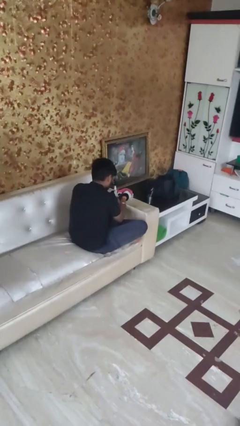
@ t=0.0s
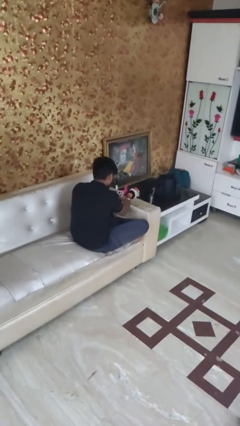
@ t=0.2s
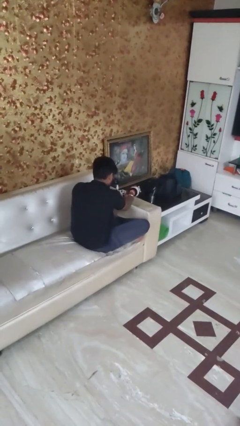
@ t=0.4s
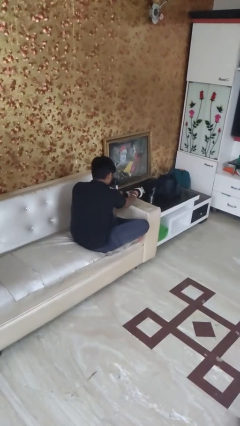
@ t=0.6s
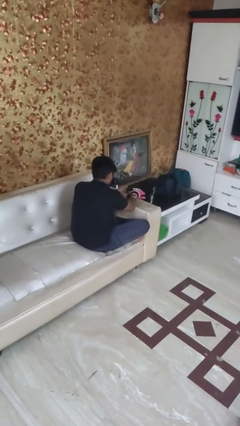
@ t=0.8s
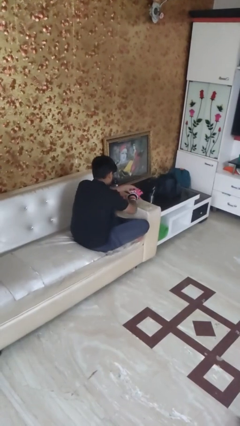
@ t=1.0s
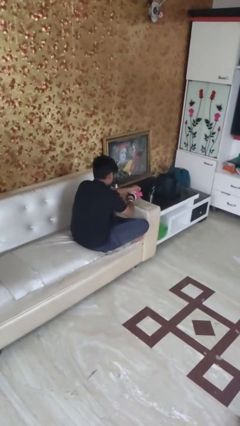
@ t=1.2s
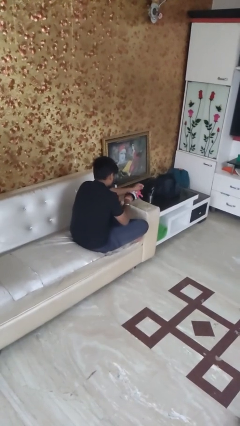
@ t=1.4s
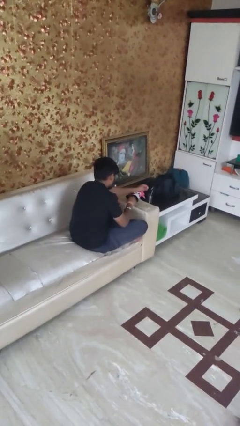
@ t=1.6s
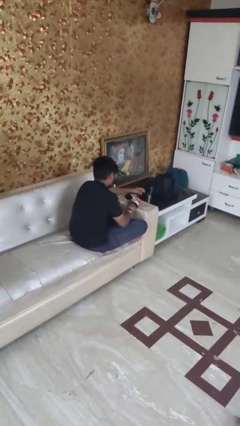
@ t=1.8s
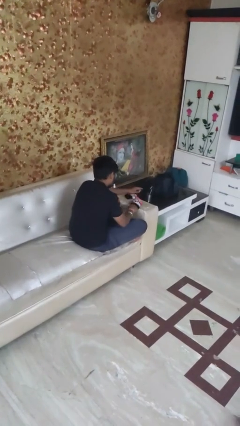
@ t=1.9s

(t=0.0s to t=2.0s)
person takes off gloves

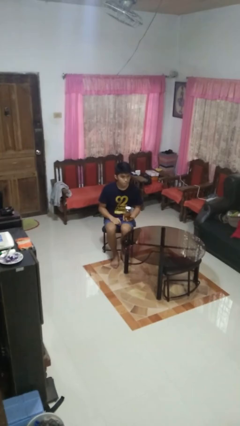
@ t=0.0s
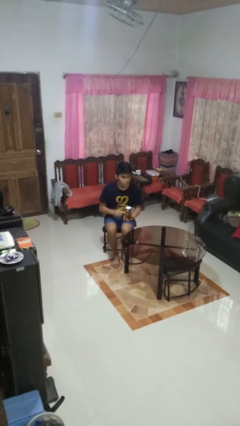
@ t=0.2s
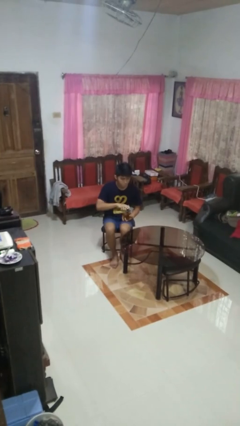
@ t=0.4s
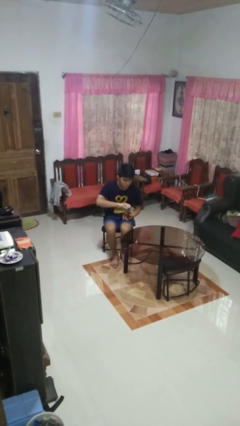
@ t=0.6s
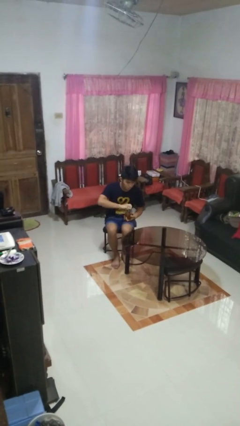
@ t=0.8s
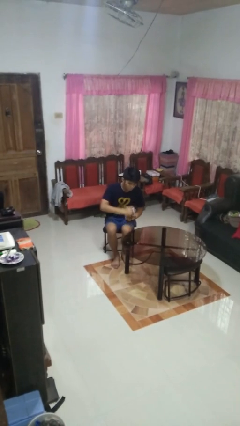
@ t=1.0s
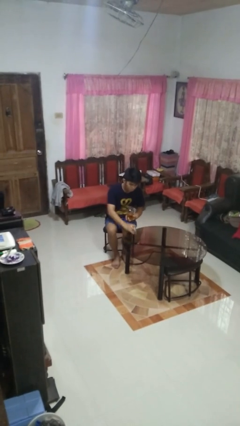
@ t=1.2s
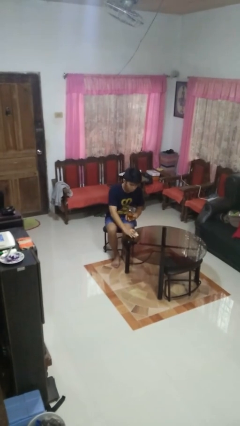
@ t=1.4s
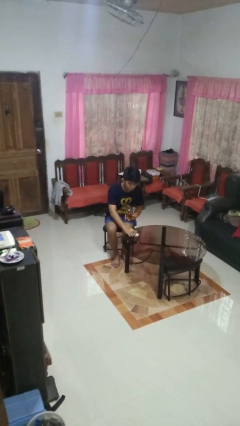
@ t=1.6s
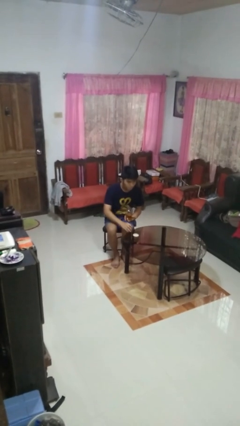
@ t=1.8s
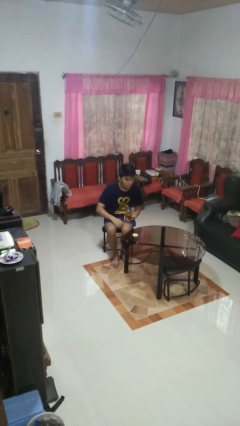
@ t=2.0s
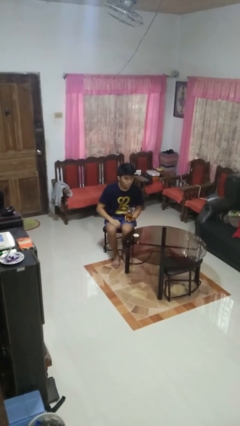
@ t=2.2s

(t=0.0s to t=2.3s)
person opens jar

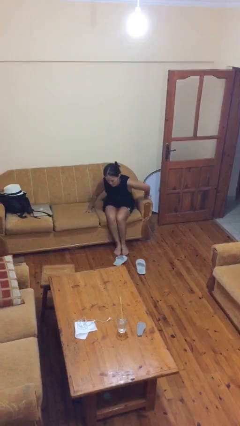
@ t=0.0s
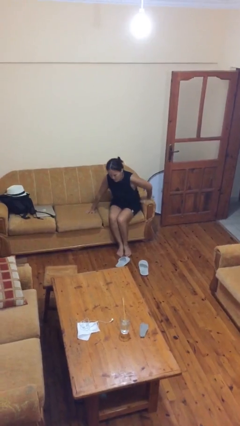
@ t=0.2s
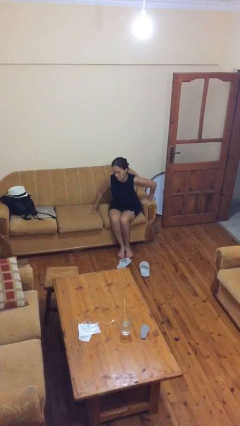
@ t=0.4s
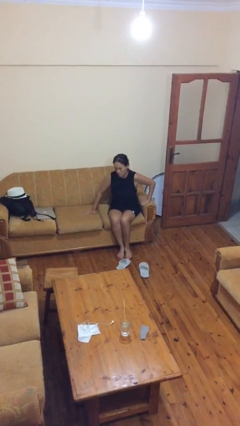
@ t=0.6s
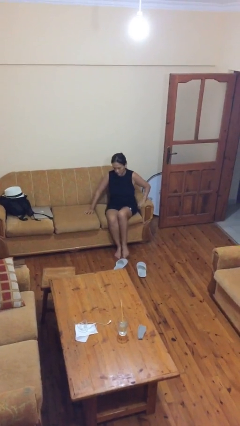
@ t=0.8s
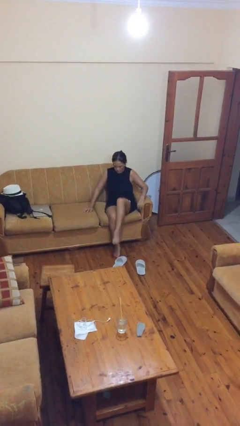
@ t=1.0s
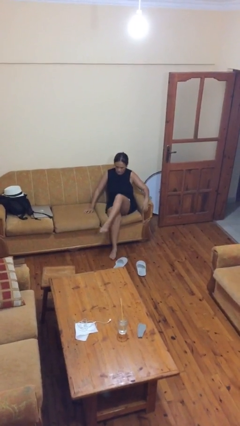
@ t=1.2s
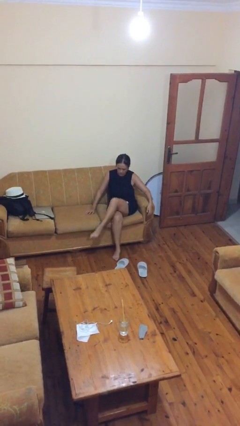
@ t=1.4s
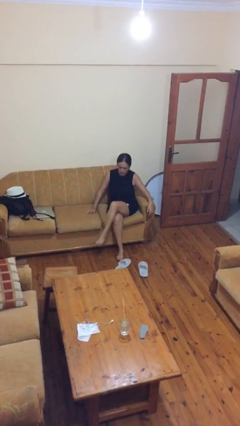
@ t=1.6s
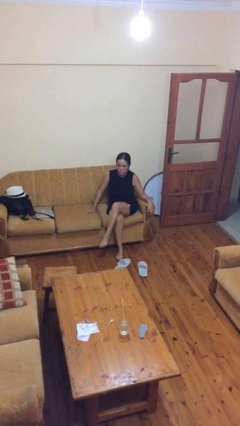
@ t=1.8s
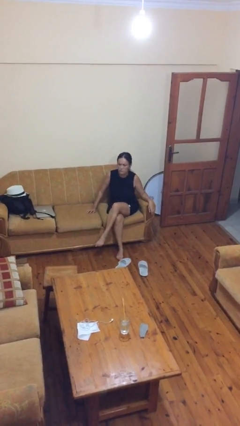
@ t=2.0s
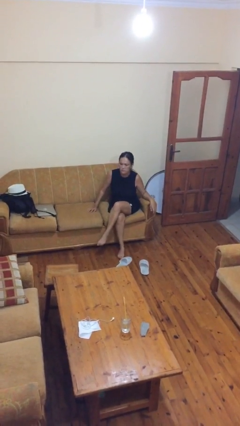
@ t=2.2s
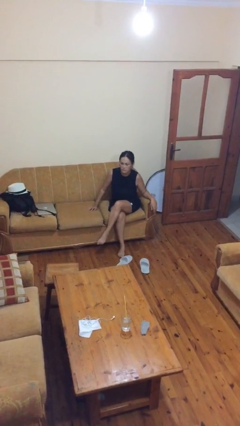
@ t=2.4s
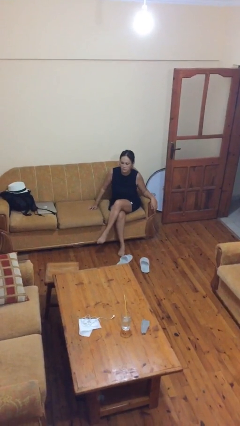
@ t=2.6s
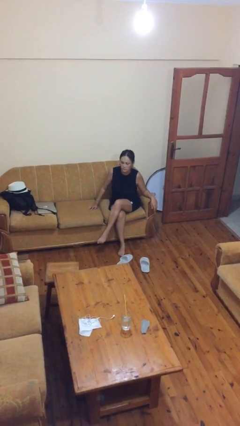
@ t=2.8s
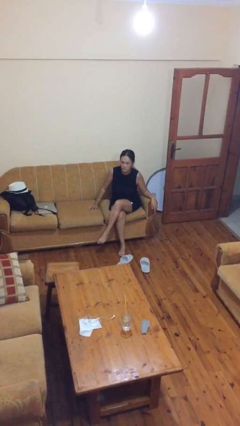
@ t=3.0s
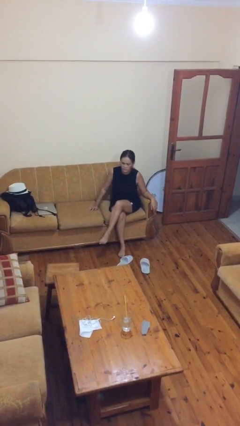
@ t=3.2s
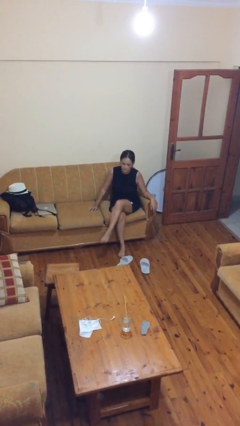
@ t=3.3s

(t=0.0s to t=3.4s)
person crosses legs

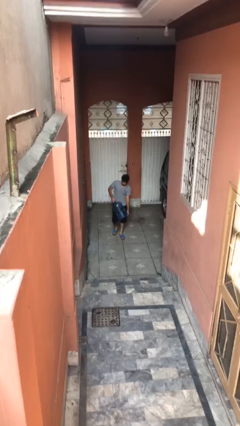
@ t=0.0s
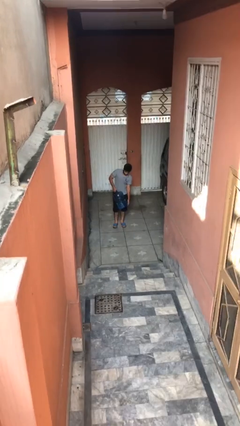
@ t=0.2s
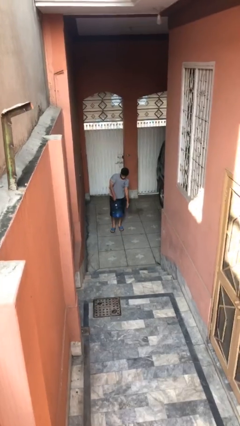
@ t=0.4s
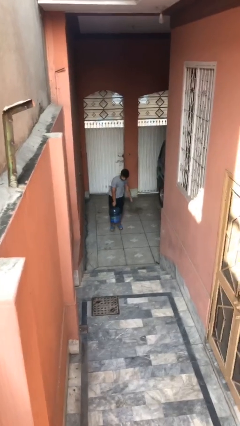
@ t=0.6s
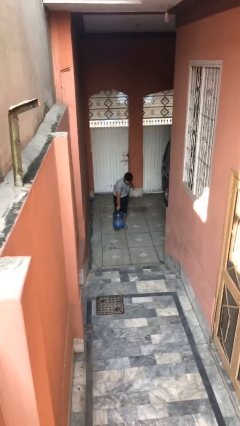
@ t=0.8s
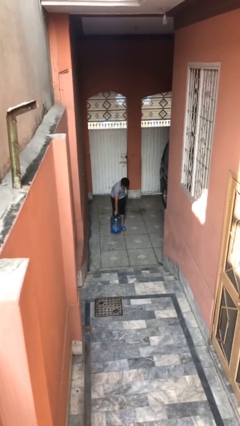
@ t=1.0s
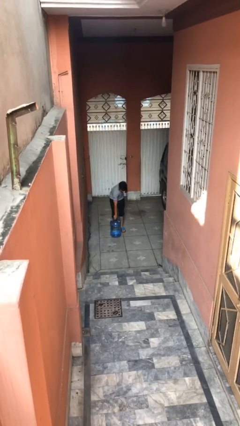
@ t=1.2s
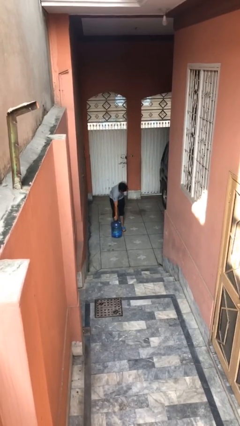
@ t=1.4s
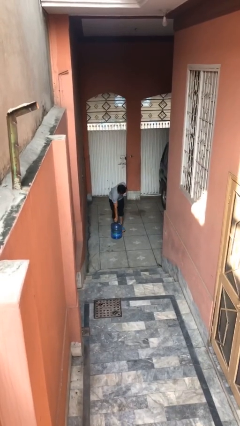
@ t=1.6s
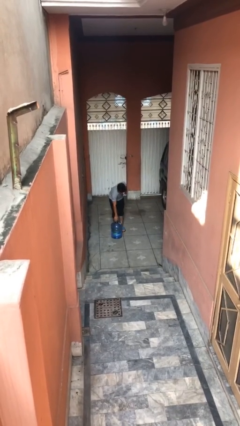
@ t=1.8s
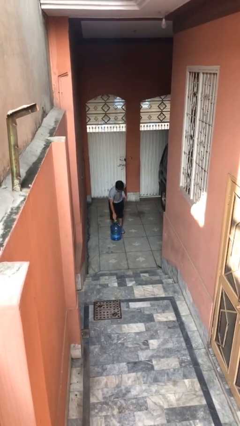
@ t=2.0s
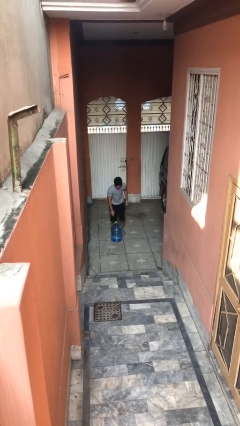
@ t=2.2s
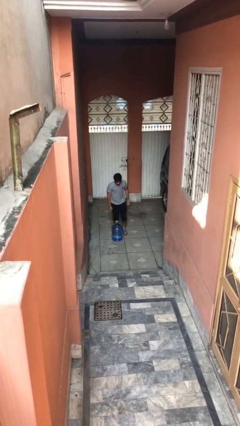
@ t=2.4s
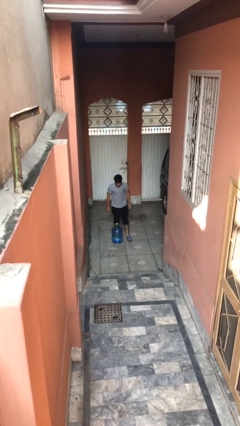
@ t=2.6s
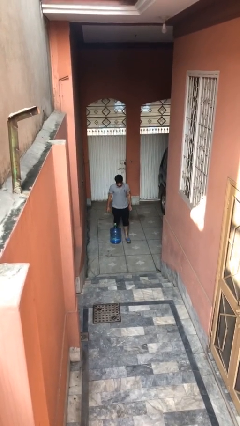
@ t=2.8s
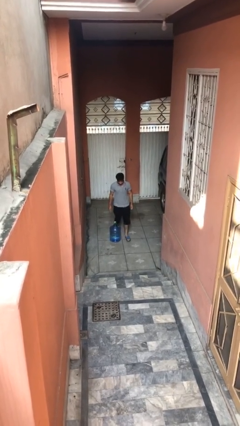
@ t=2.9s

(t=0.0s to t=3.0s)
person puts down object on floor

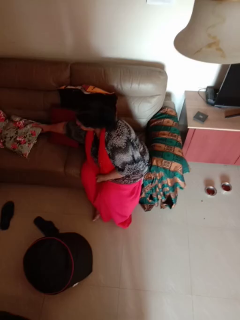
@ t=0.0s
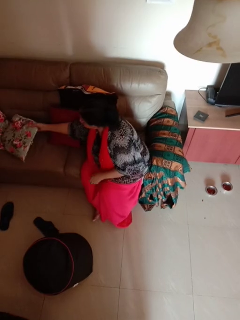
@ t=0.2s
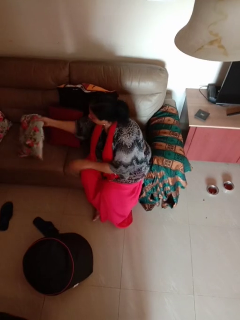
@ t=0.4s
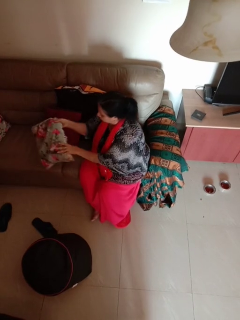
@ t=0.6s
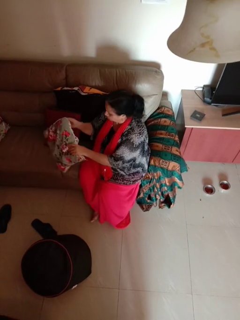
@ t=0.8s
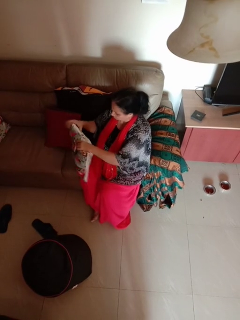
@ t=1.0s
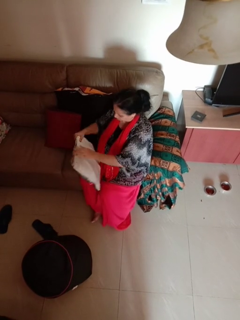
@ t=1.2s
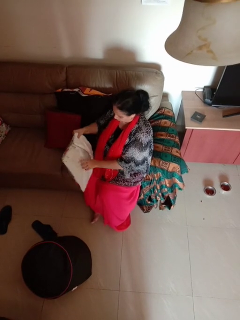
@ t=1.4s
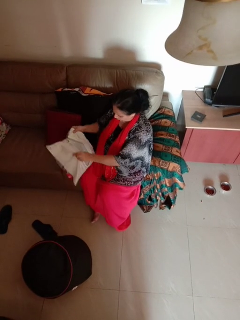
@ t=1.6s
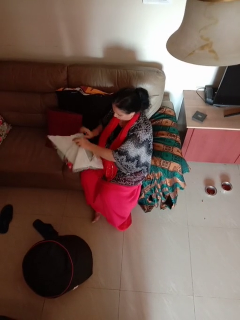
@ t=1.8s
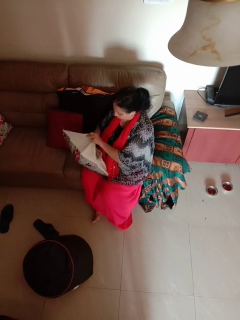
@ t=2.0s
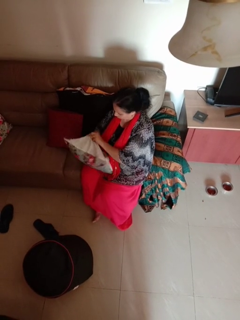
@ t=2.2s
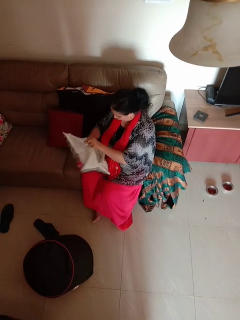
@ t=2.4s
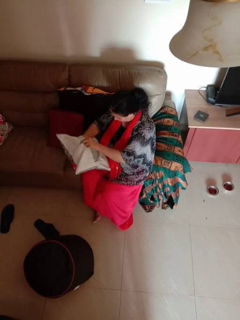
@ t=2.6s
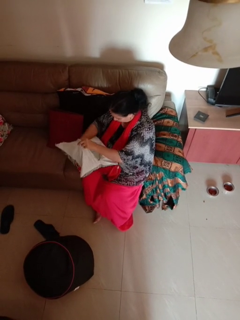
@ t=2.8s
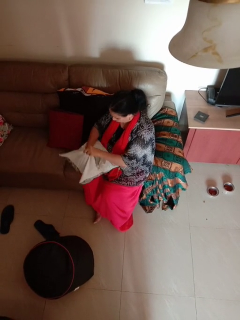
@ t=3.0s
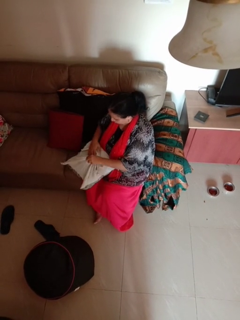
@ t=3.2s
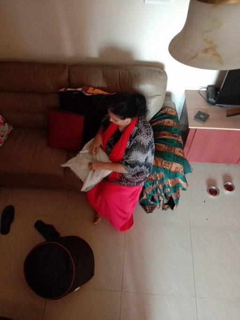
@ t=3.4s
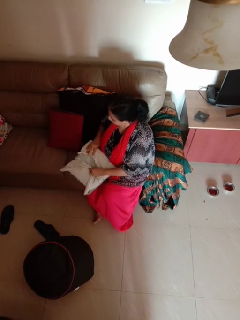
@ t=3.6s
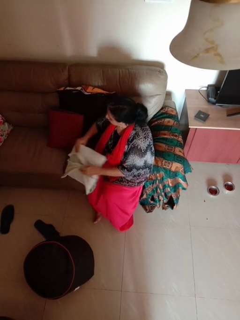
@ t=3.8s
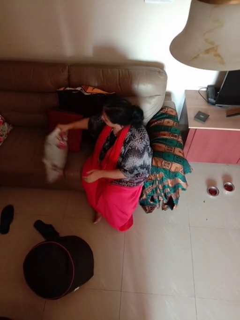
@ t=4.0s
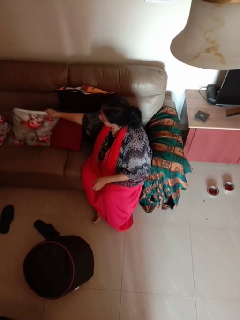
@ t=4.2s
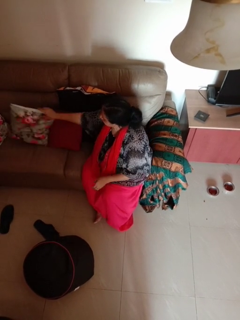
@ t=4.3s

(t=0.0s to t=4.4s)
person searches in couch

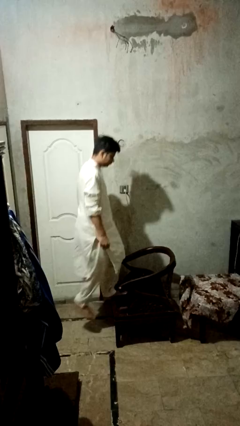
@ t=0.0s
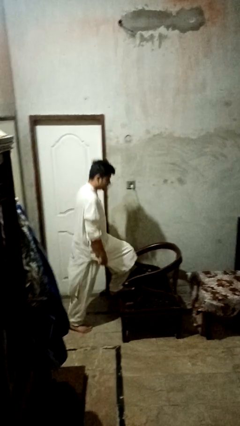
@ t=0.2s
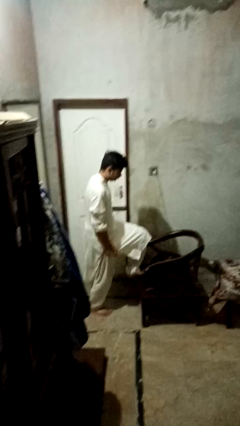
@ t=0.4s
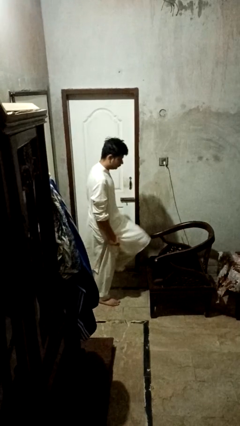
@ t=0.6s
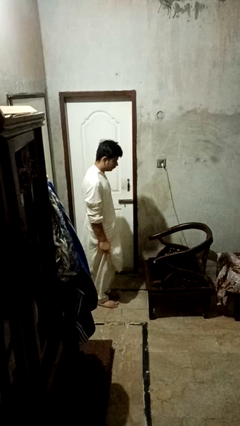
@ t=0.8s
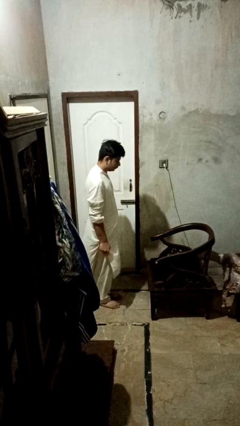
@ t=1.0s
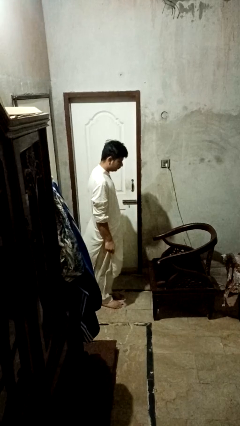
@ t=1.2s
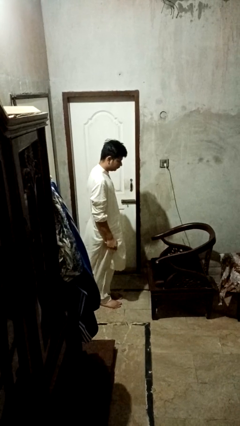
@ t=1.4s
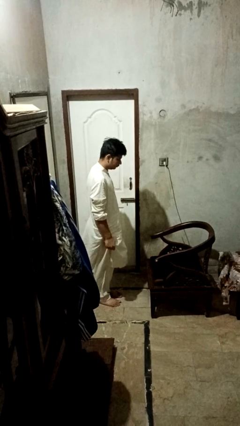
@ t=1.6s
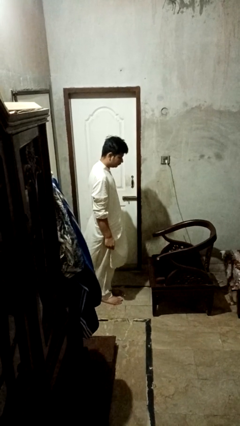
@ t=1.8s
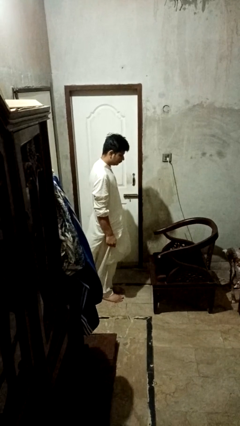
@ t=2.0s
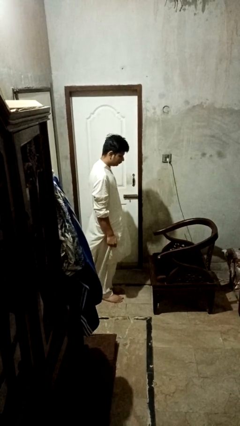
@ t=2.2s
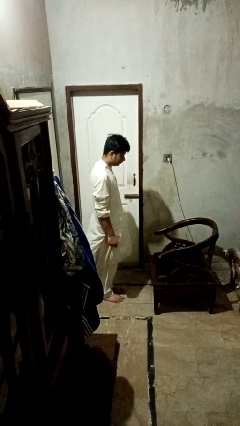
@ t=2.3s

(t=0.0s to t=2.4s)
person climbs off couch

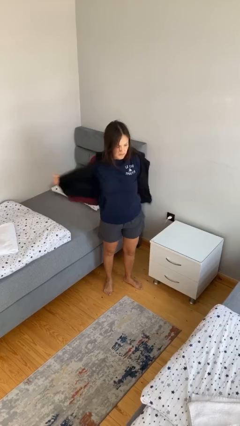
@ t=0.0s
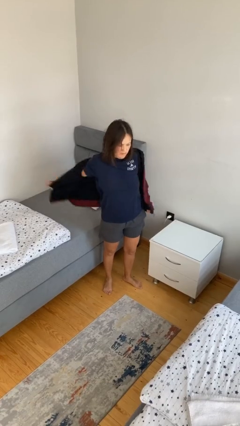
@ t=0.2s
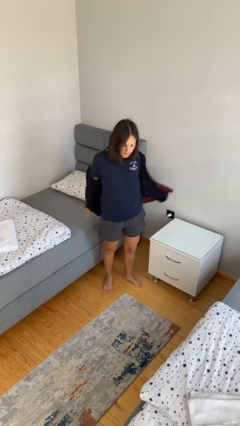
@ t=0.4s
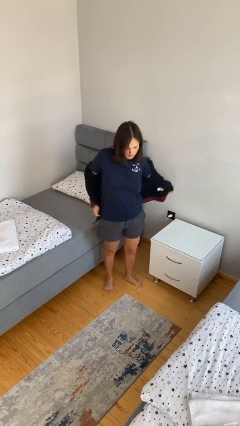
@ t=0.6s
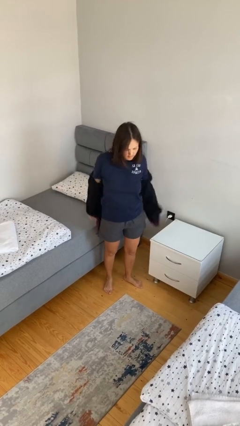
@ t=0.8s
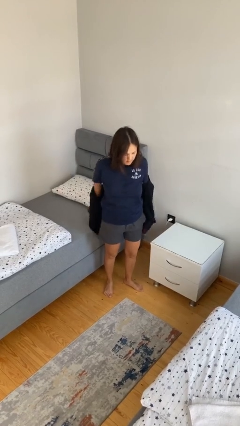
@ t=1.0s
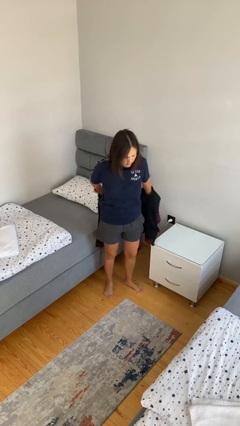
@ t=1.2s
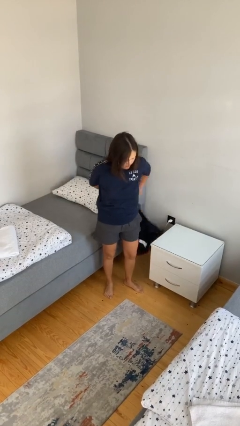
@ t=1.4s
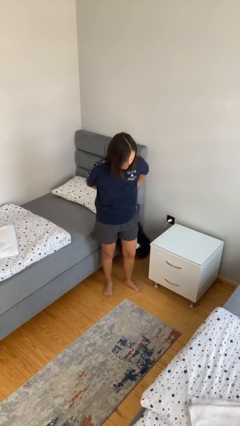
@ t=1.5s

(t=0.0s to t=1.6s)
person takes off jacket
